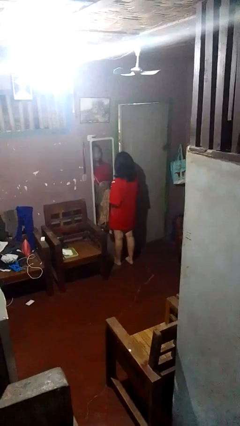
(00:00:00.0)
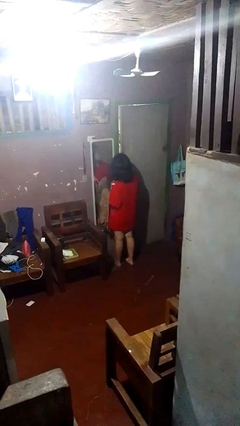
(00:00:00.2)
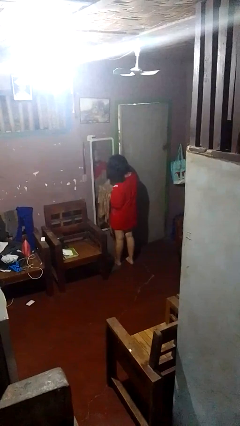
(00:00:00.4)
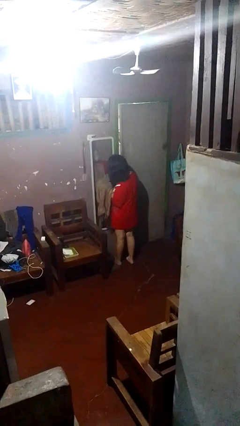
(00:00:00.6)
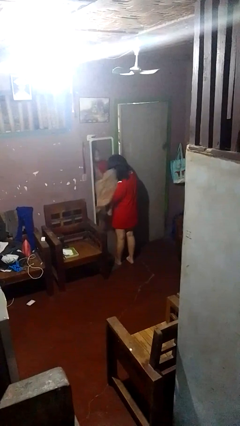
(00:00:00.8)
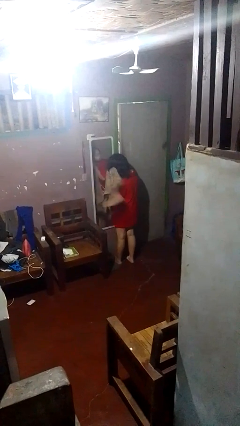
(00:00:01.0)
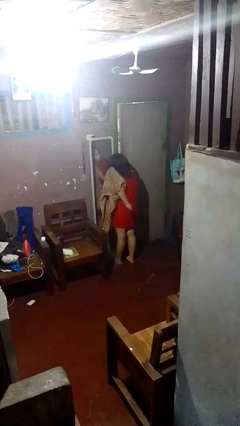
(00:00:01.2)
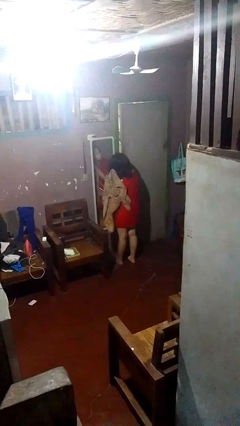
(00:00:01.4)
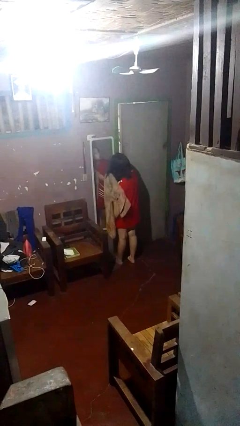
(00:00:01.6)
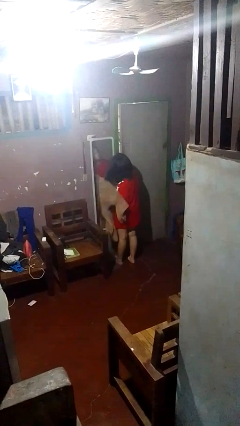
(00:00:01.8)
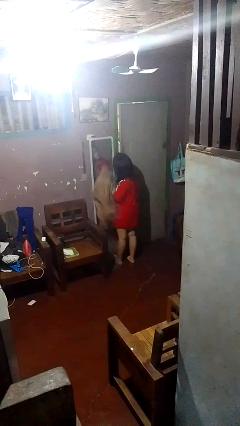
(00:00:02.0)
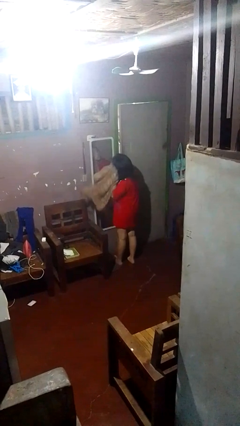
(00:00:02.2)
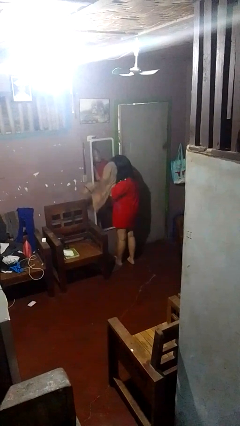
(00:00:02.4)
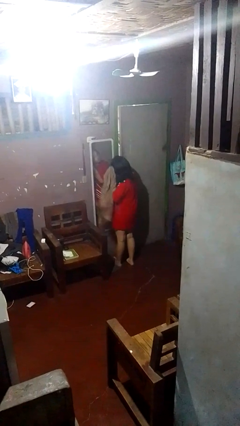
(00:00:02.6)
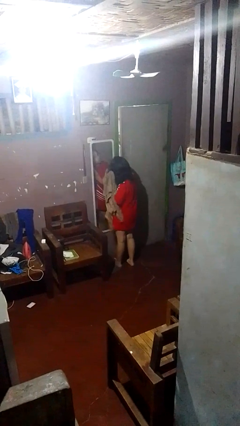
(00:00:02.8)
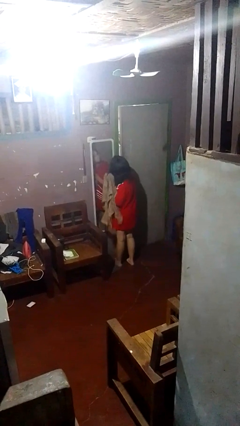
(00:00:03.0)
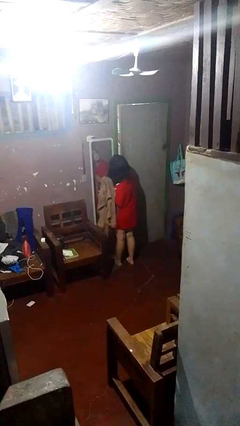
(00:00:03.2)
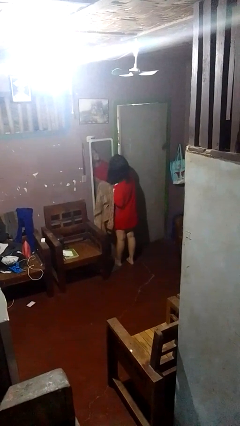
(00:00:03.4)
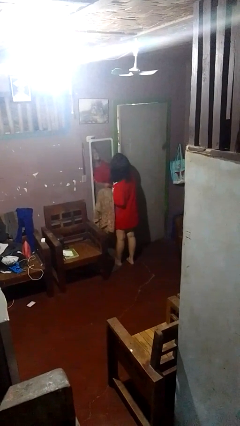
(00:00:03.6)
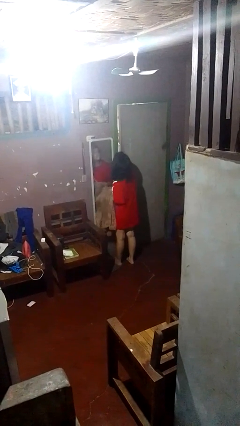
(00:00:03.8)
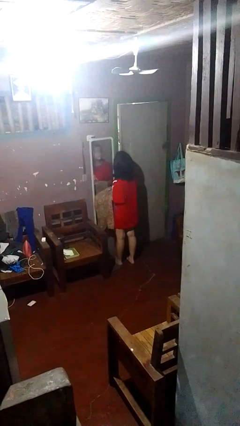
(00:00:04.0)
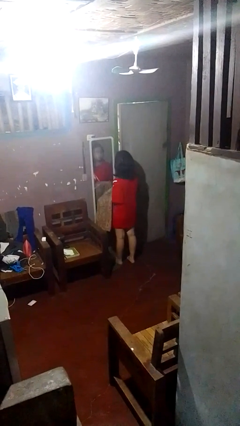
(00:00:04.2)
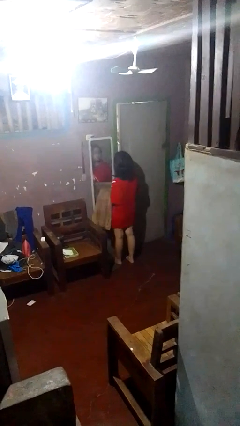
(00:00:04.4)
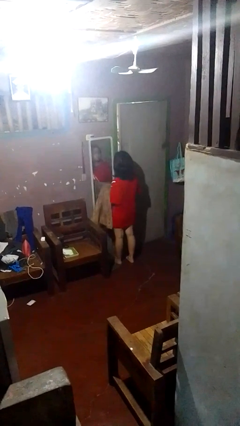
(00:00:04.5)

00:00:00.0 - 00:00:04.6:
person dries hair with towel

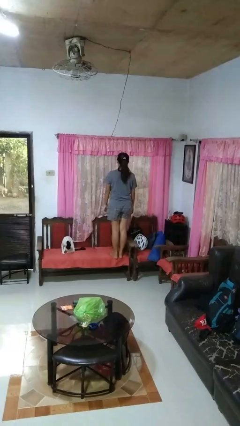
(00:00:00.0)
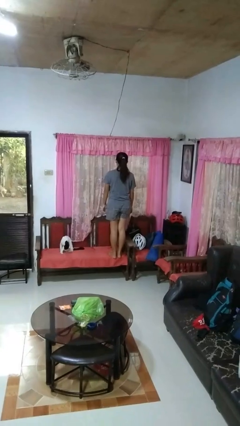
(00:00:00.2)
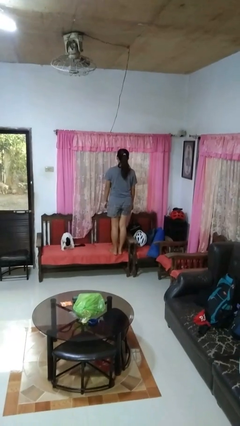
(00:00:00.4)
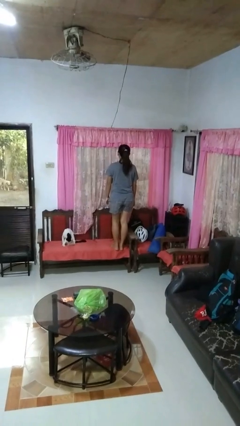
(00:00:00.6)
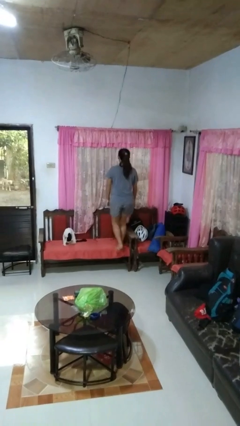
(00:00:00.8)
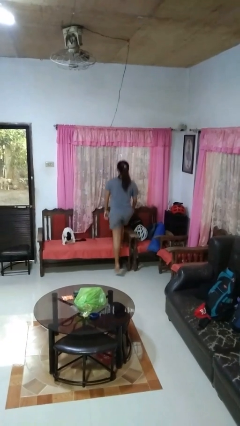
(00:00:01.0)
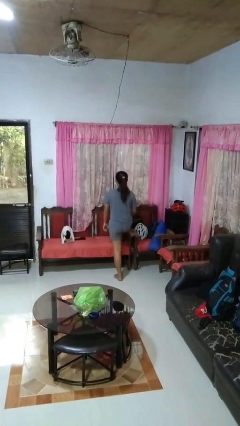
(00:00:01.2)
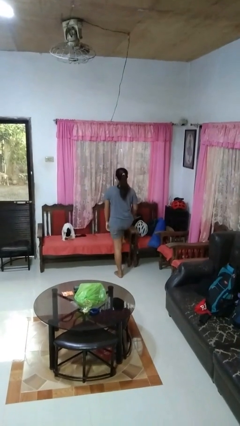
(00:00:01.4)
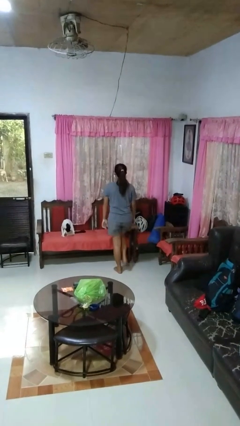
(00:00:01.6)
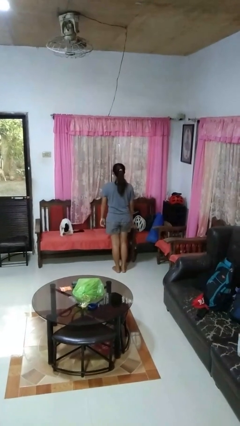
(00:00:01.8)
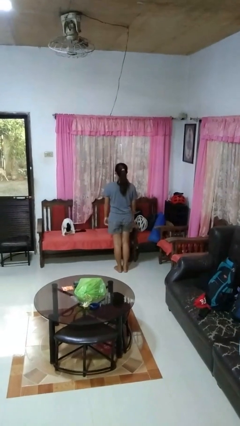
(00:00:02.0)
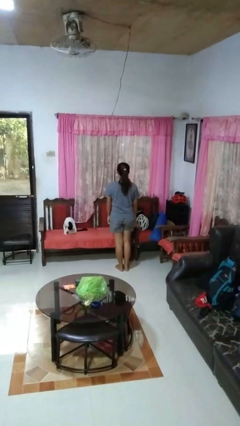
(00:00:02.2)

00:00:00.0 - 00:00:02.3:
person climbs off chair

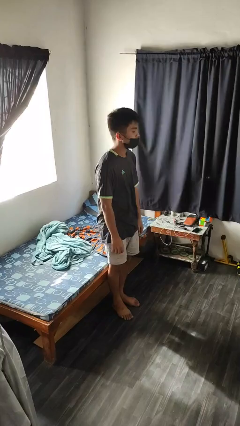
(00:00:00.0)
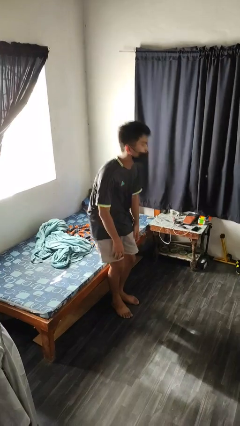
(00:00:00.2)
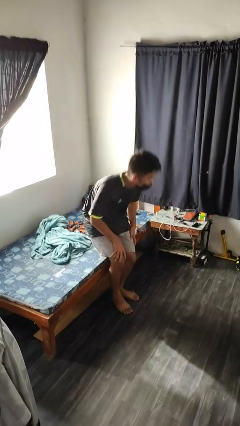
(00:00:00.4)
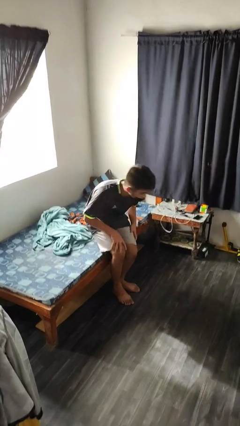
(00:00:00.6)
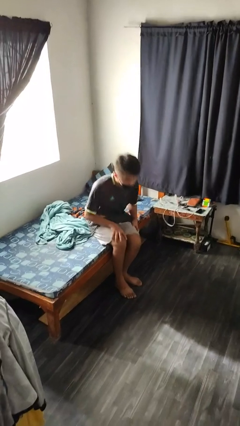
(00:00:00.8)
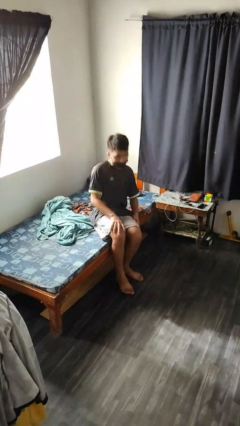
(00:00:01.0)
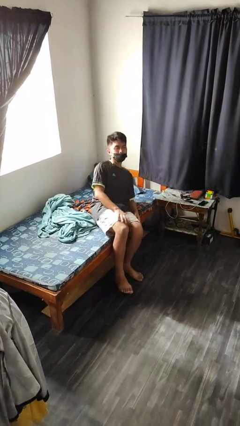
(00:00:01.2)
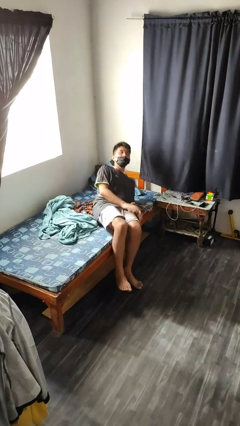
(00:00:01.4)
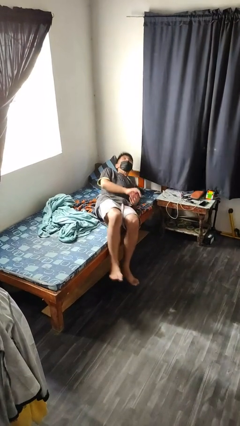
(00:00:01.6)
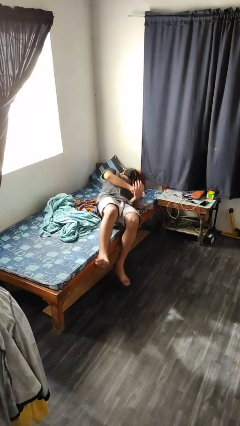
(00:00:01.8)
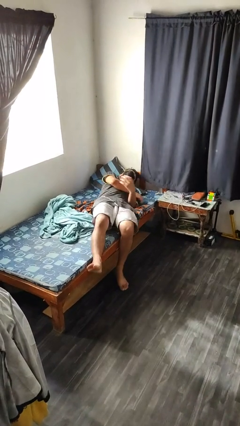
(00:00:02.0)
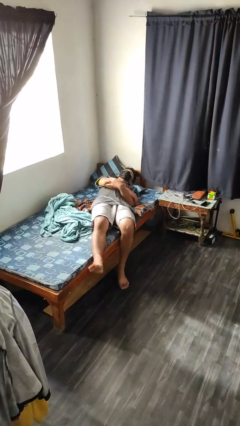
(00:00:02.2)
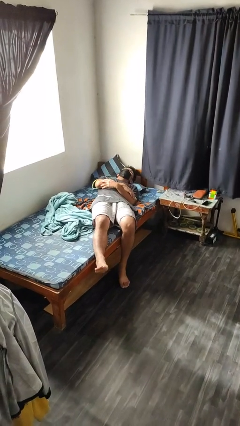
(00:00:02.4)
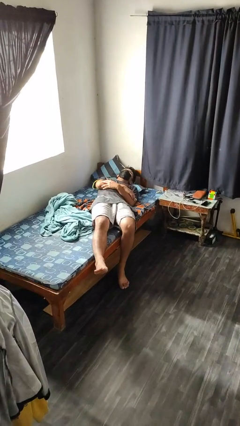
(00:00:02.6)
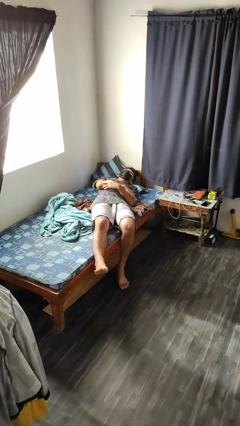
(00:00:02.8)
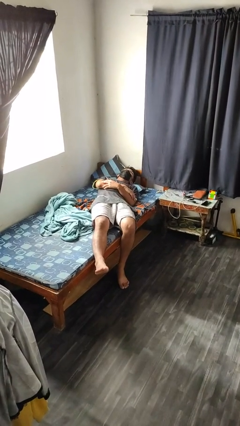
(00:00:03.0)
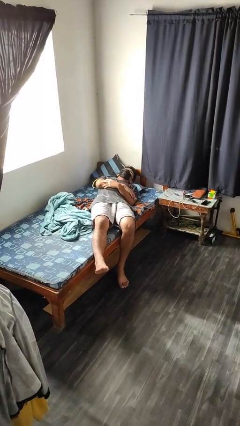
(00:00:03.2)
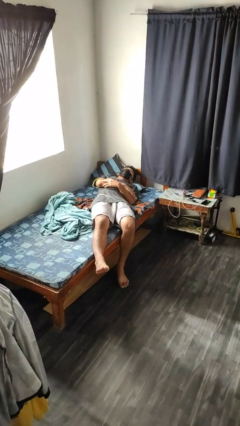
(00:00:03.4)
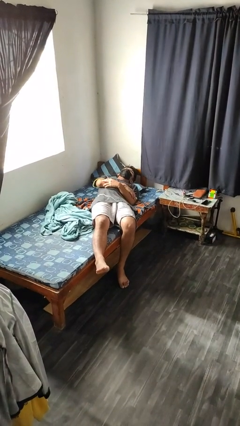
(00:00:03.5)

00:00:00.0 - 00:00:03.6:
person lies down on bed

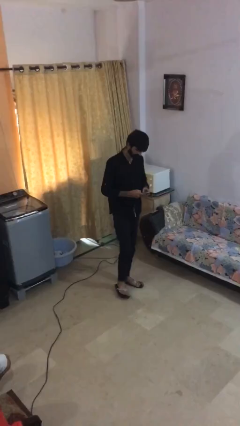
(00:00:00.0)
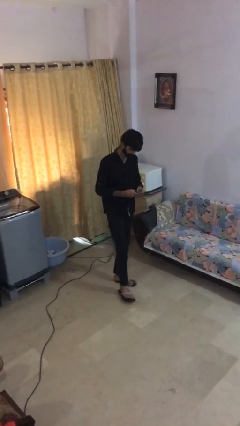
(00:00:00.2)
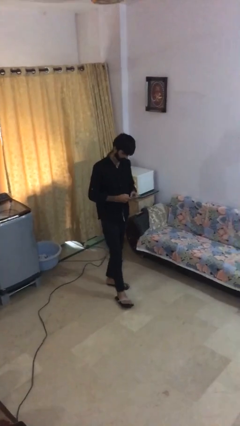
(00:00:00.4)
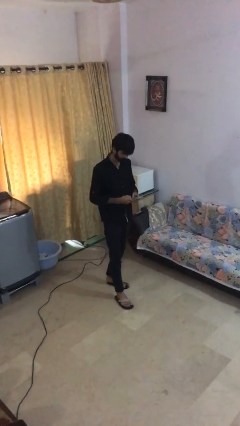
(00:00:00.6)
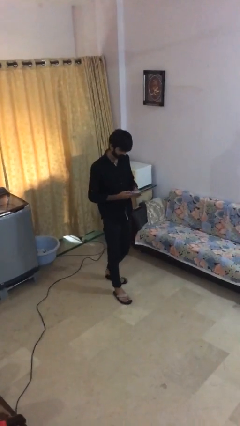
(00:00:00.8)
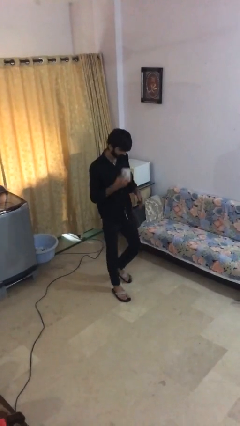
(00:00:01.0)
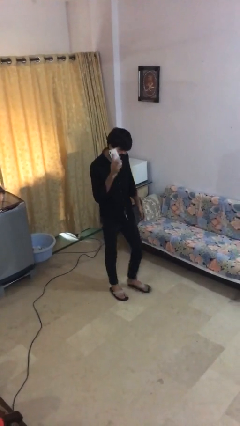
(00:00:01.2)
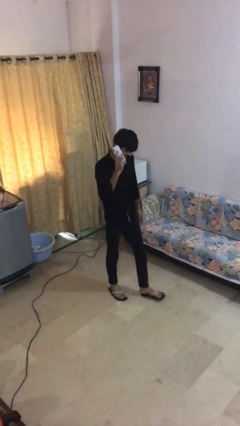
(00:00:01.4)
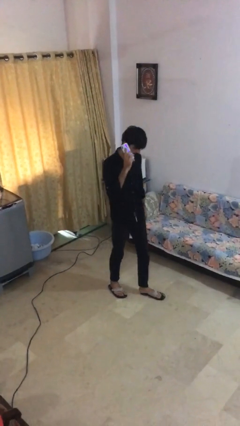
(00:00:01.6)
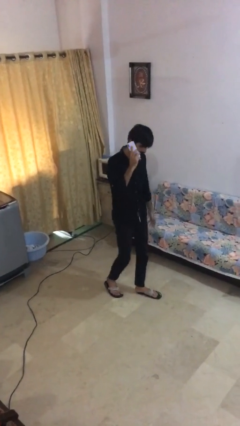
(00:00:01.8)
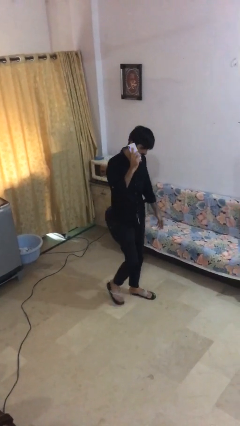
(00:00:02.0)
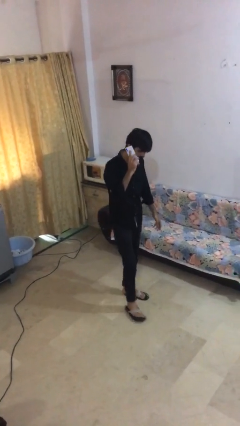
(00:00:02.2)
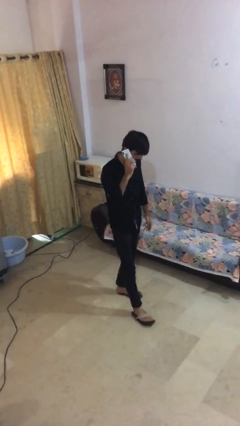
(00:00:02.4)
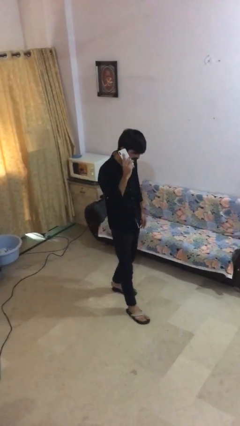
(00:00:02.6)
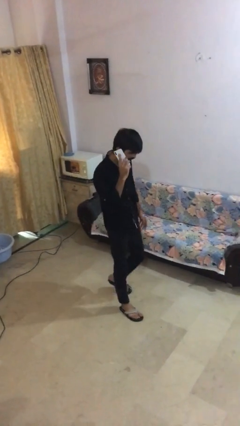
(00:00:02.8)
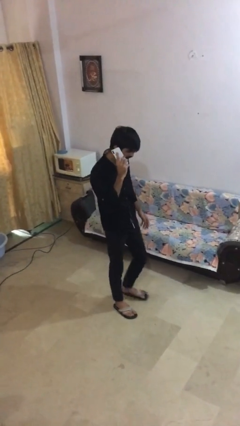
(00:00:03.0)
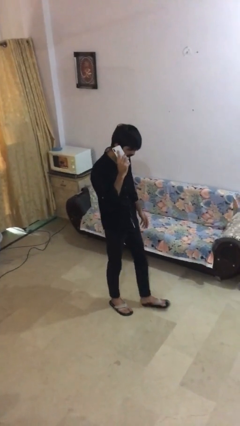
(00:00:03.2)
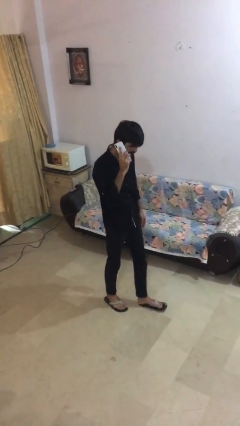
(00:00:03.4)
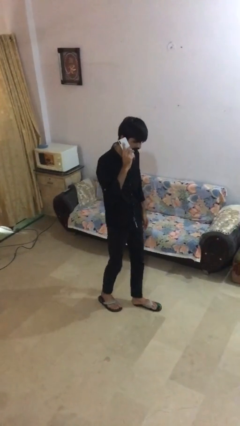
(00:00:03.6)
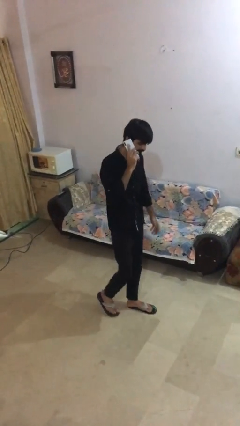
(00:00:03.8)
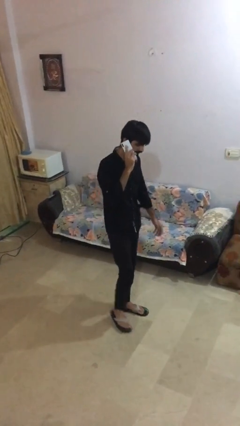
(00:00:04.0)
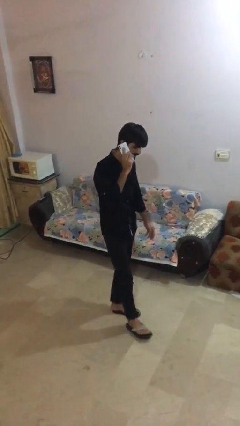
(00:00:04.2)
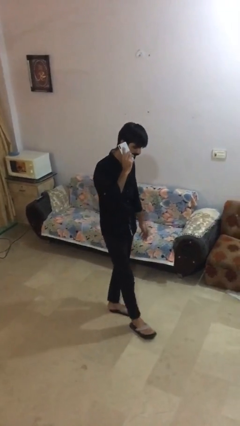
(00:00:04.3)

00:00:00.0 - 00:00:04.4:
person talks on phone

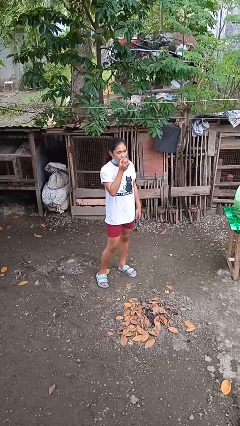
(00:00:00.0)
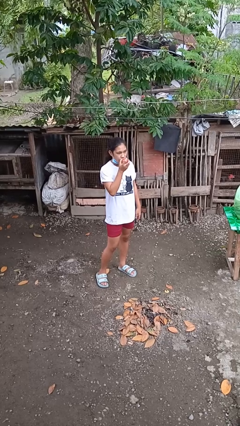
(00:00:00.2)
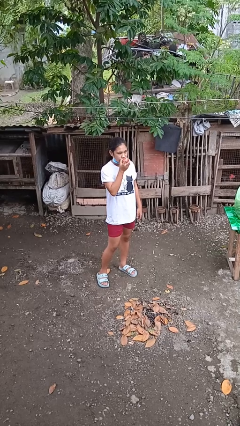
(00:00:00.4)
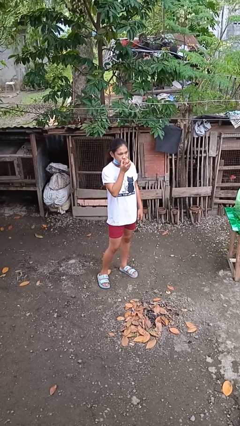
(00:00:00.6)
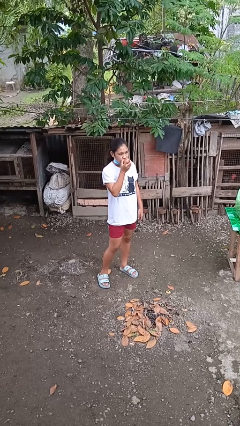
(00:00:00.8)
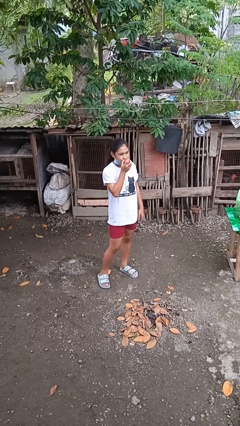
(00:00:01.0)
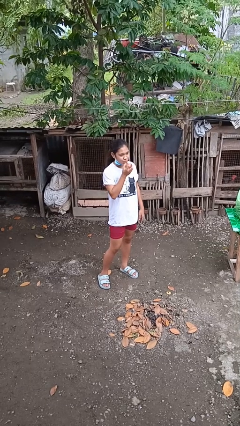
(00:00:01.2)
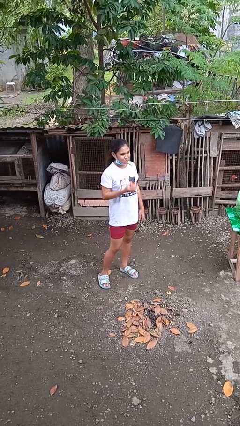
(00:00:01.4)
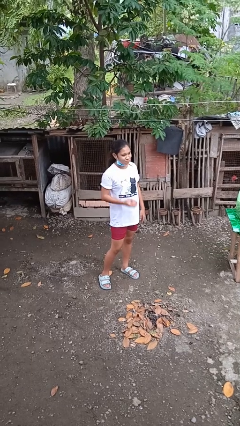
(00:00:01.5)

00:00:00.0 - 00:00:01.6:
person eats apple

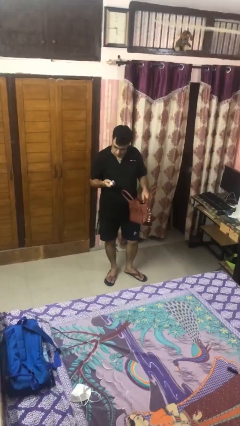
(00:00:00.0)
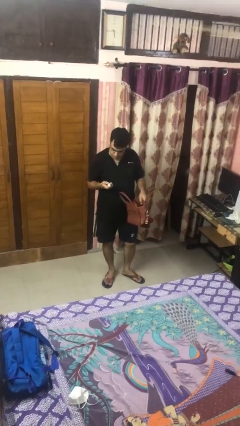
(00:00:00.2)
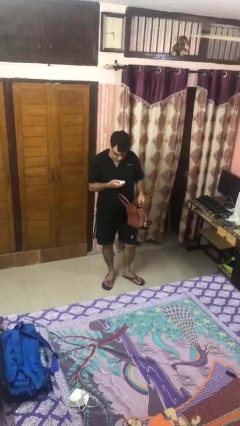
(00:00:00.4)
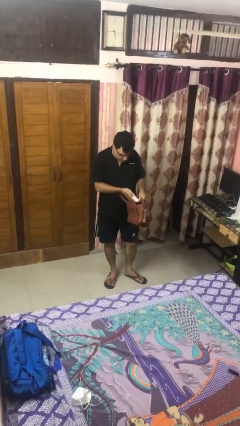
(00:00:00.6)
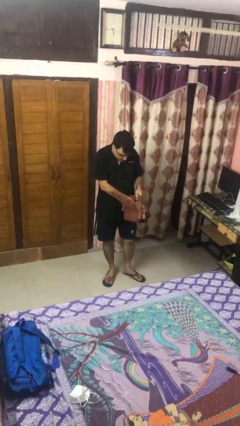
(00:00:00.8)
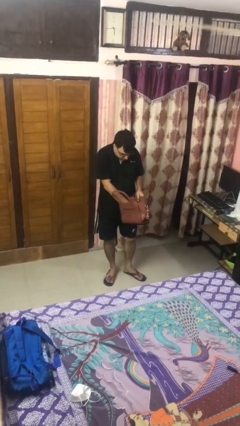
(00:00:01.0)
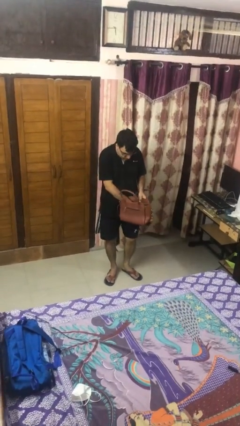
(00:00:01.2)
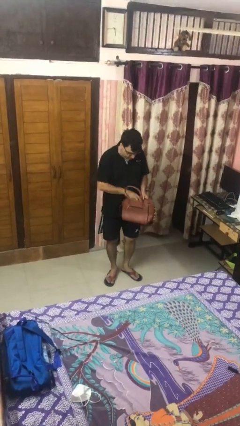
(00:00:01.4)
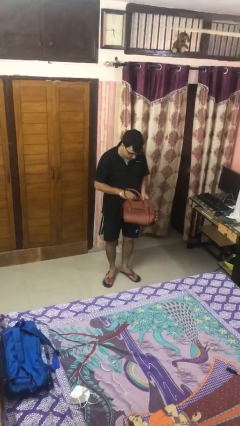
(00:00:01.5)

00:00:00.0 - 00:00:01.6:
person puts object into purse
